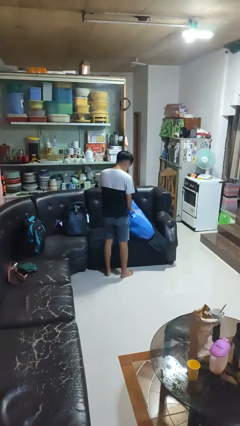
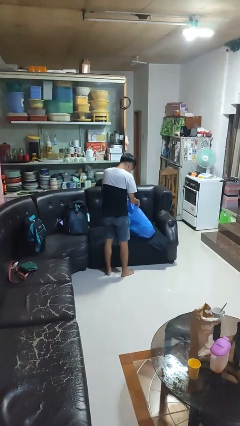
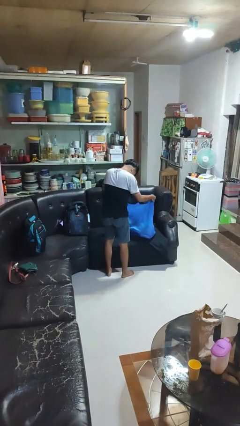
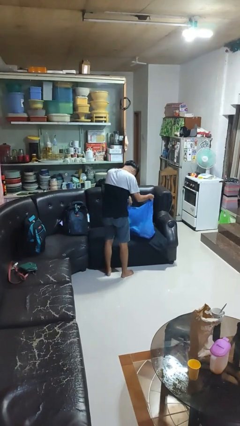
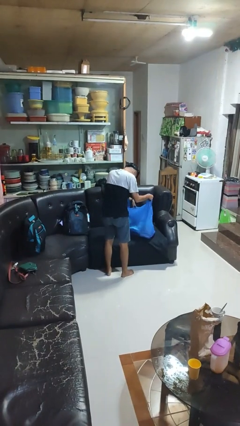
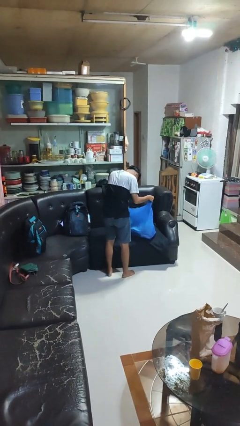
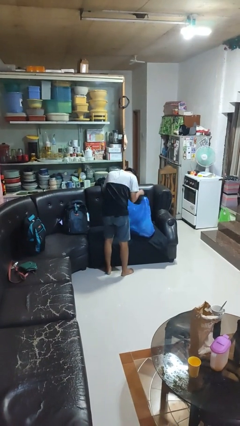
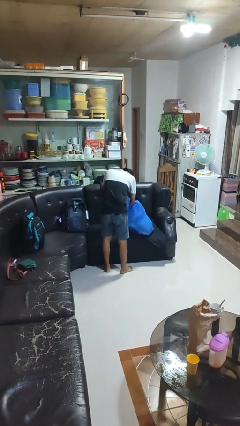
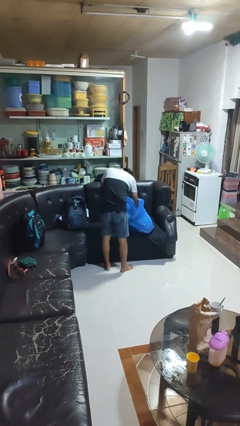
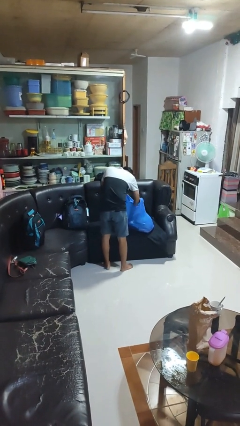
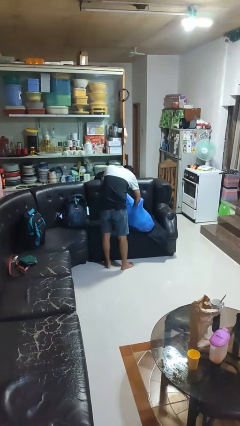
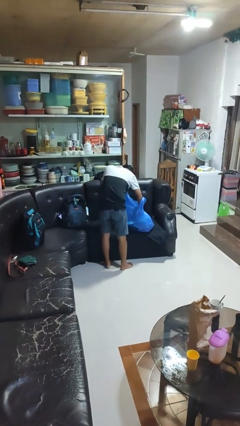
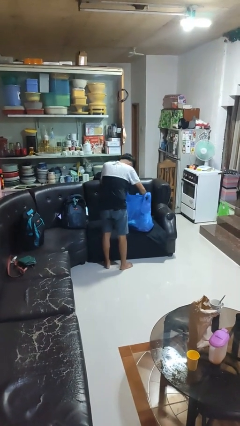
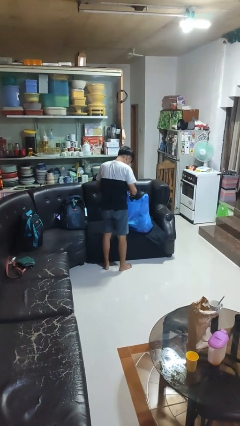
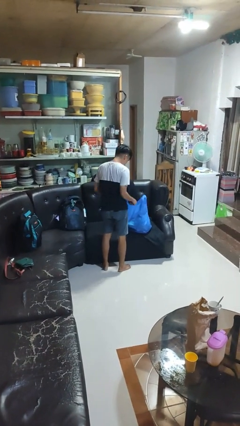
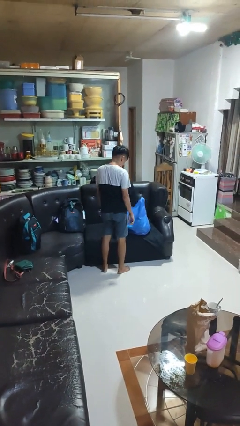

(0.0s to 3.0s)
person searches in bag

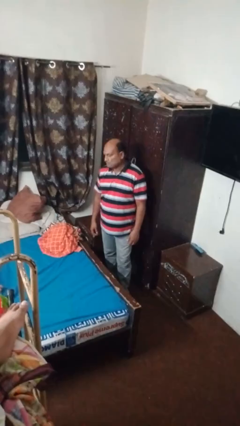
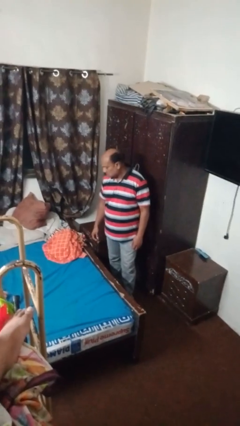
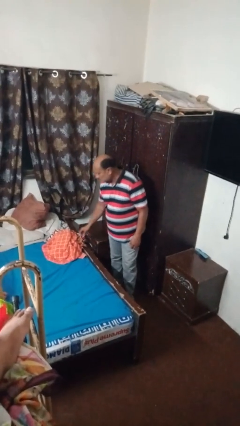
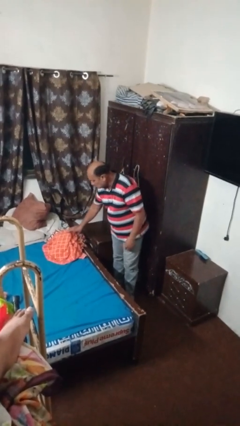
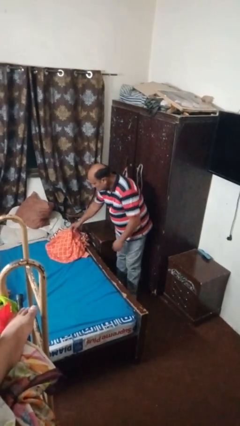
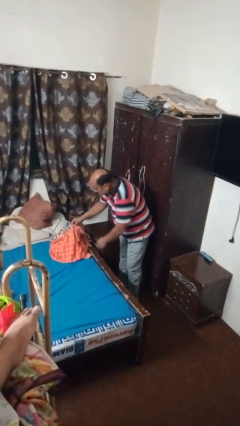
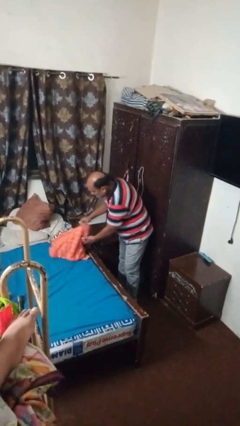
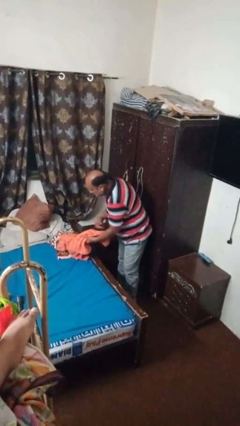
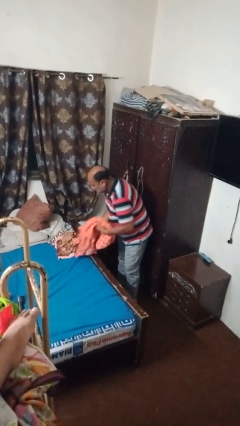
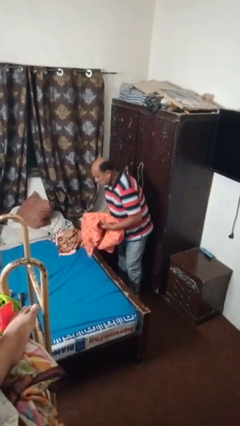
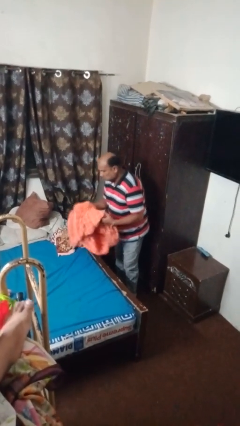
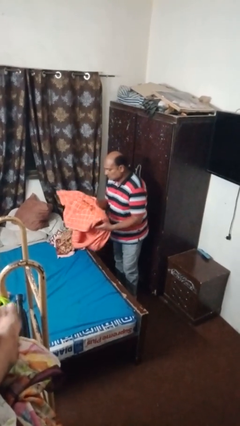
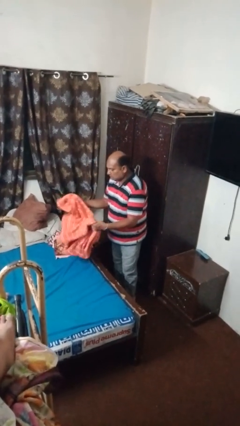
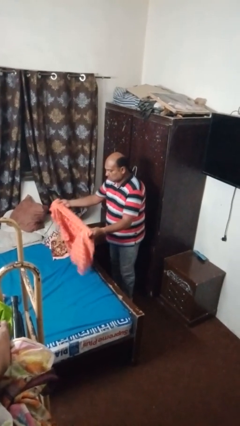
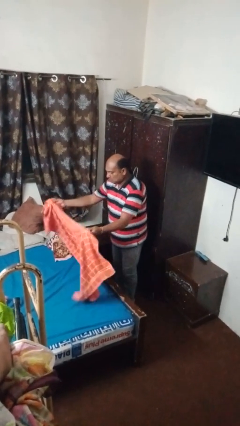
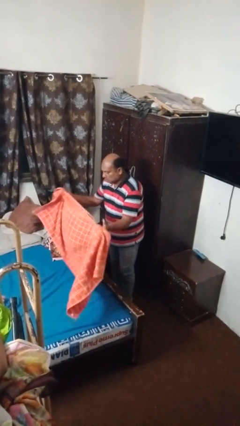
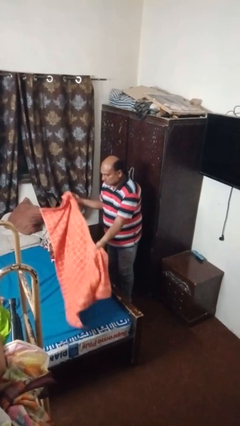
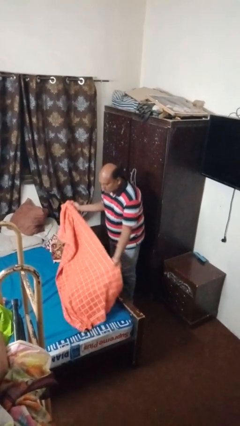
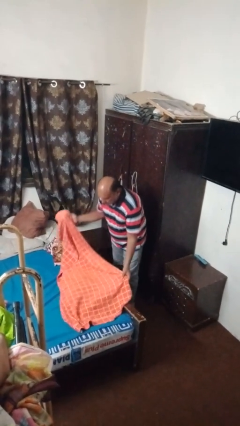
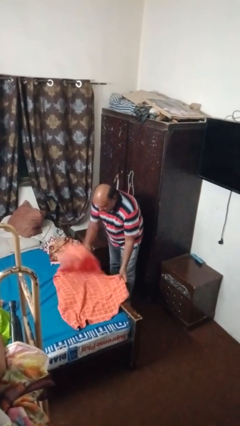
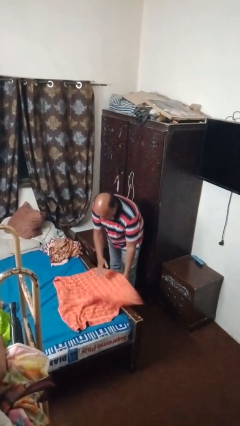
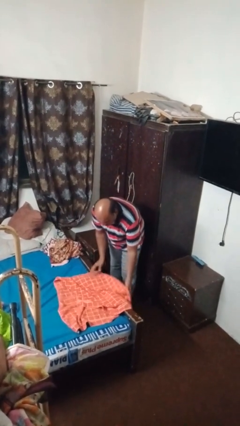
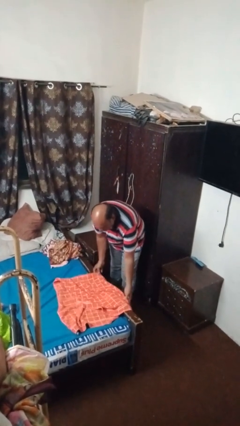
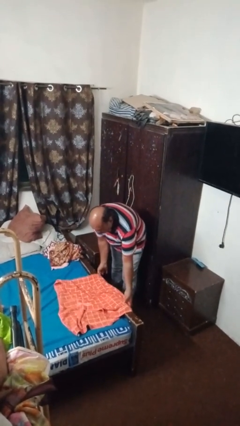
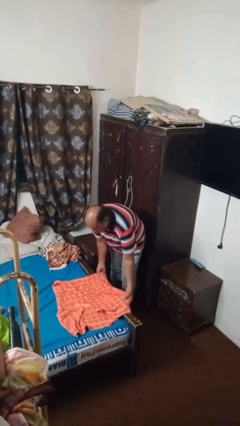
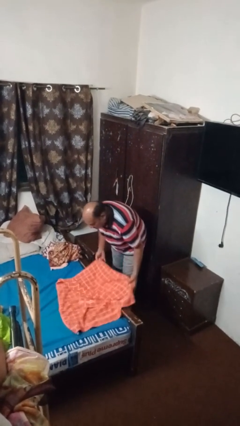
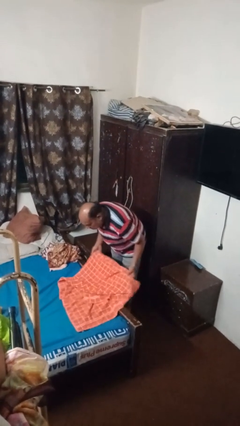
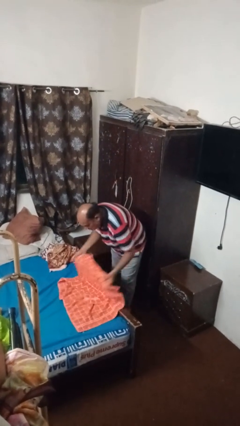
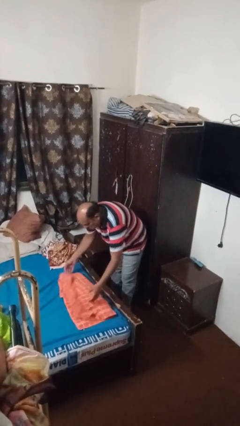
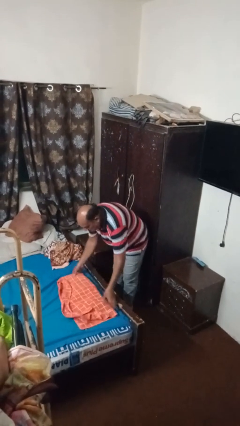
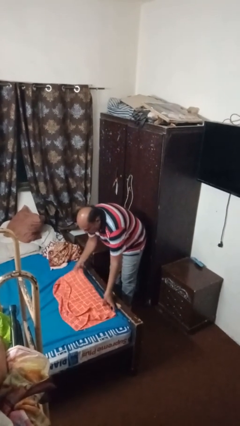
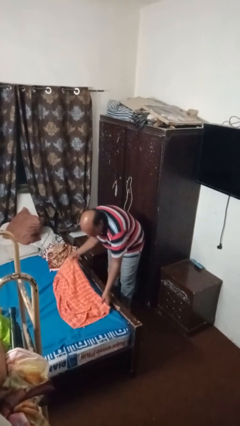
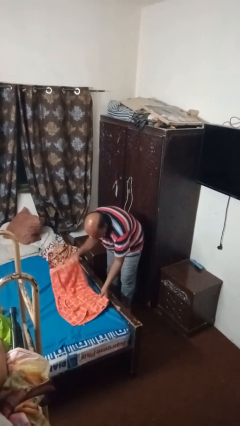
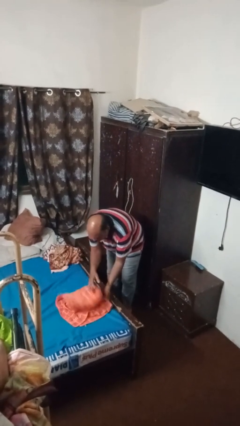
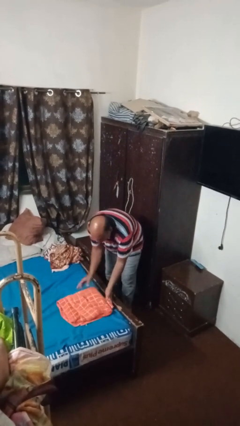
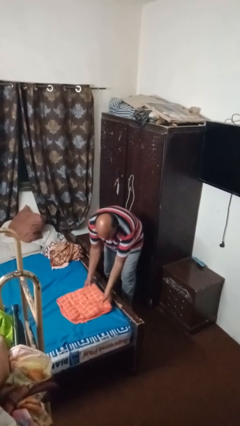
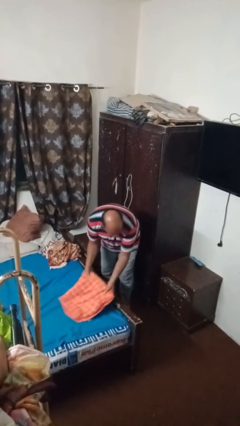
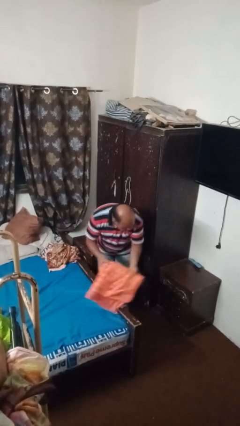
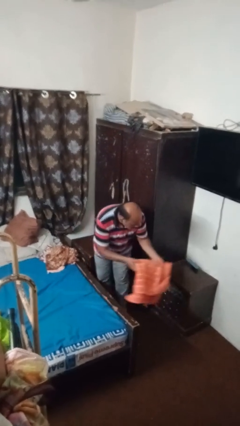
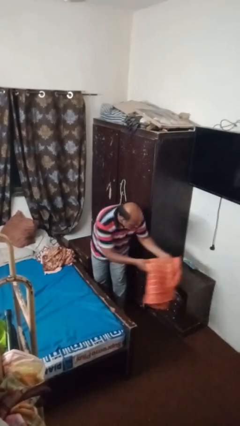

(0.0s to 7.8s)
person folds towel

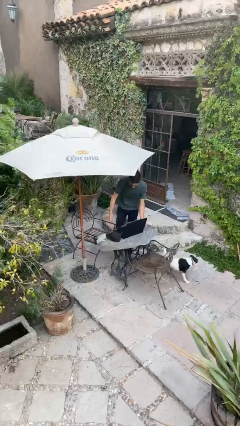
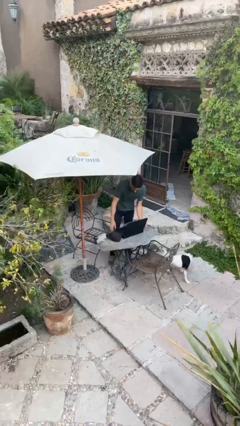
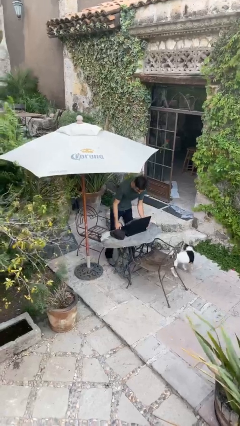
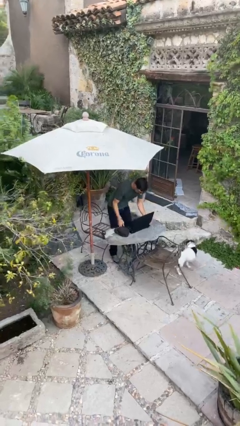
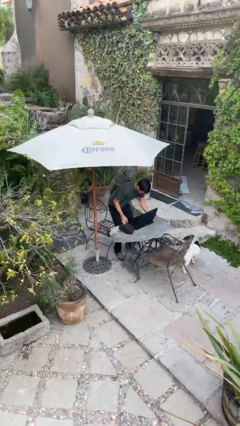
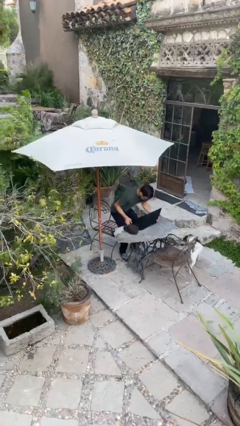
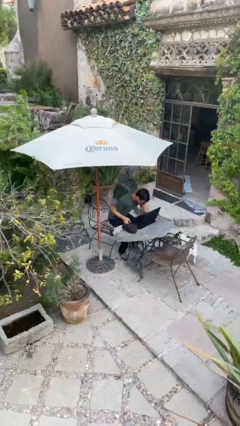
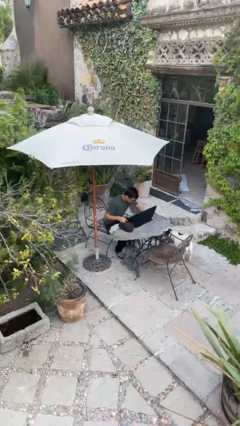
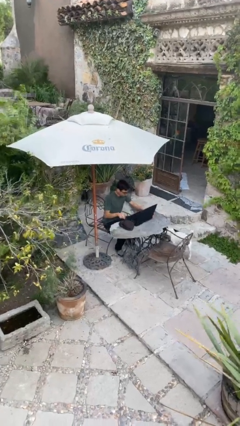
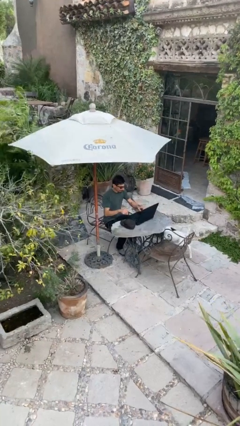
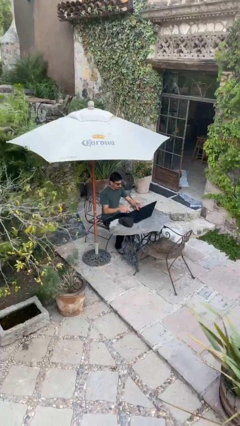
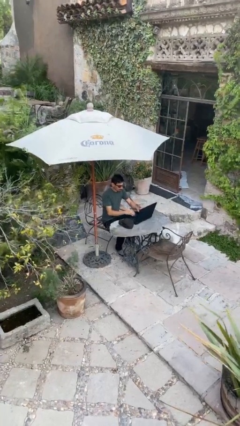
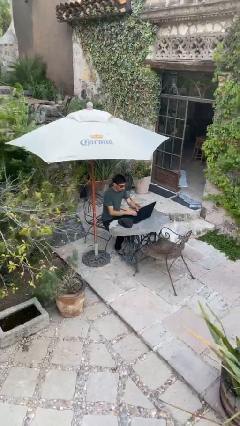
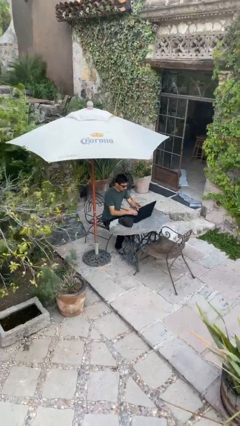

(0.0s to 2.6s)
person sits down

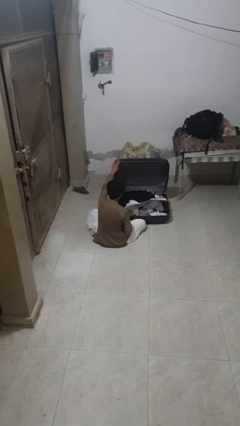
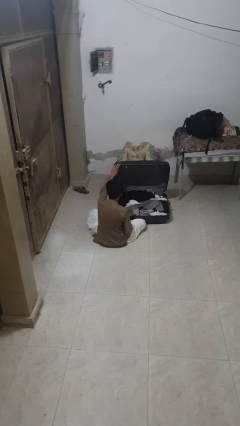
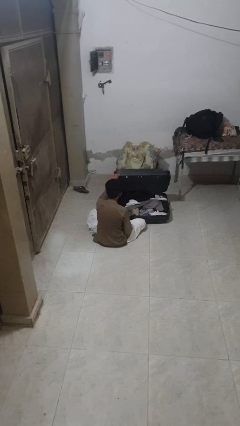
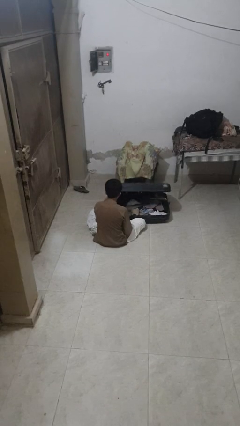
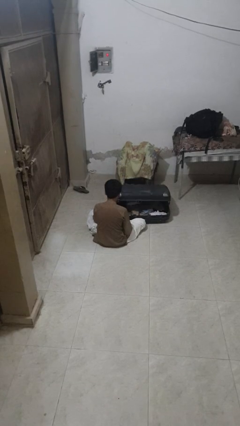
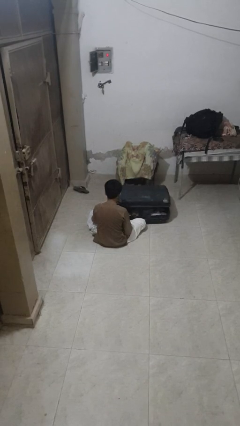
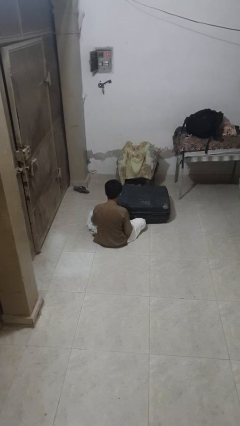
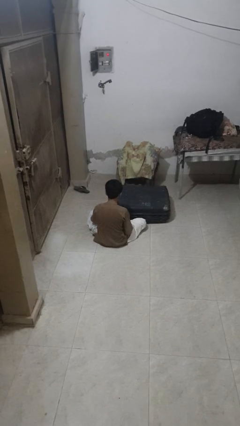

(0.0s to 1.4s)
person closes suitcase

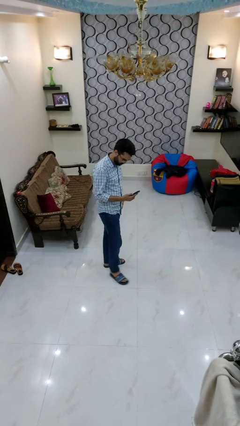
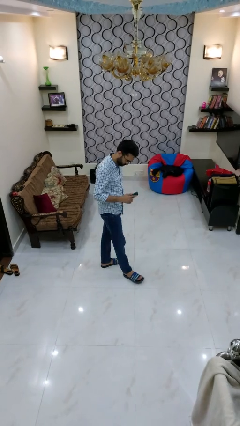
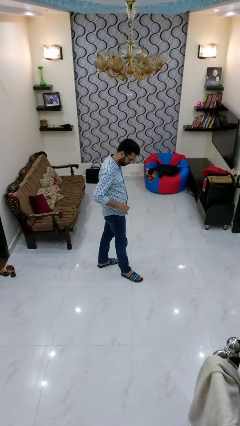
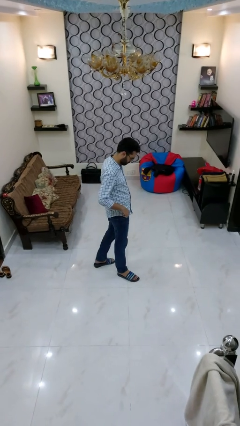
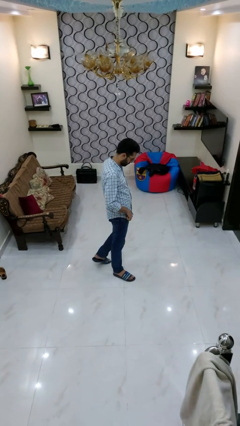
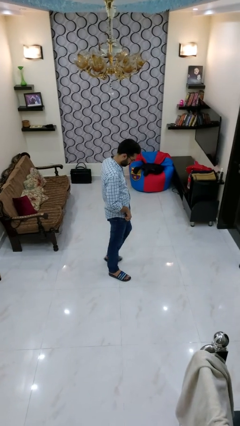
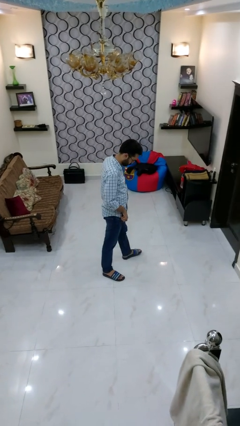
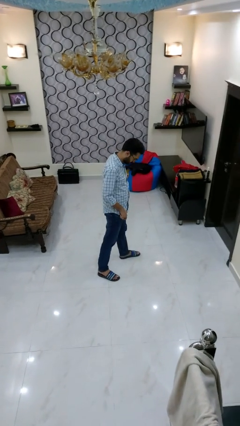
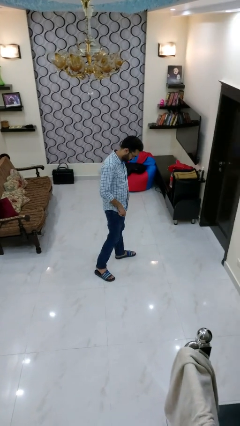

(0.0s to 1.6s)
person puts phone into pocket

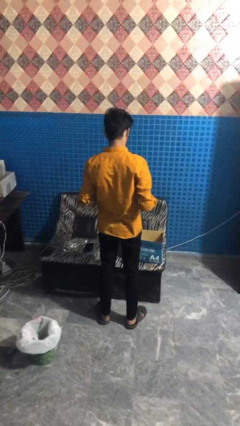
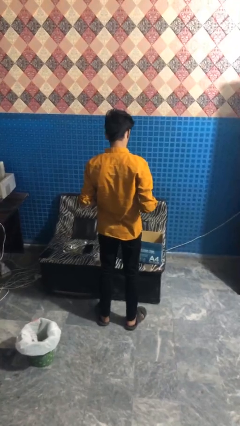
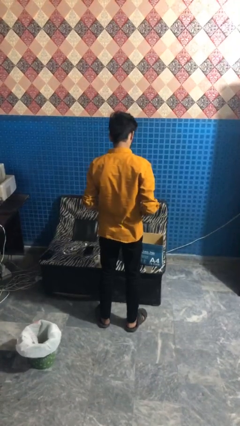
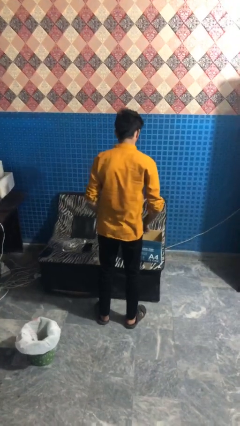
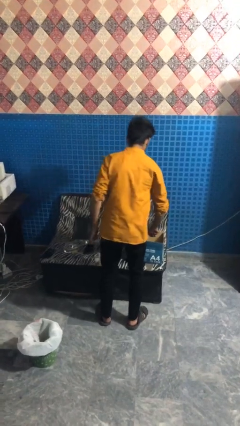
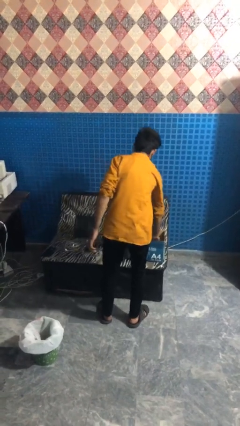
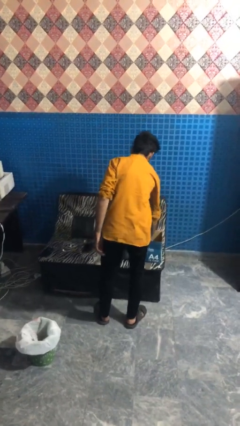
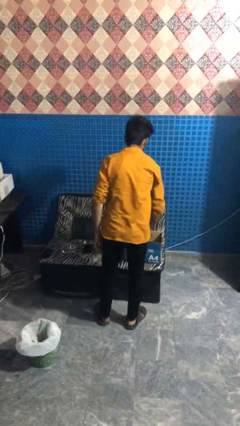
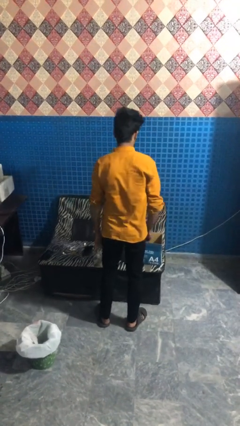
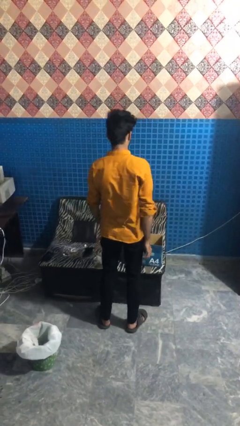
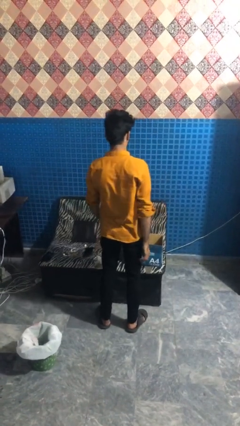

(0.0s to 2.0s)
person puts object into box
